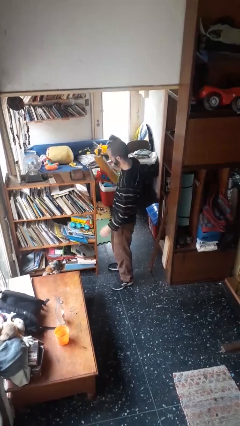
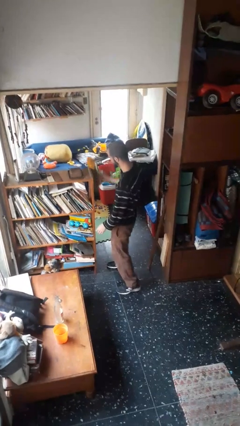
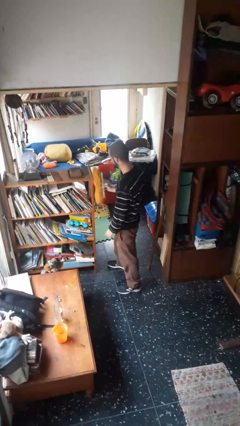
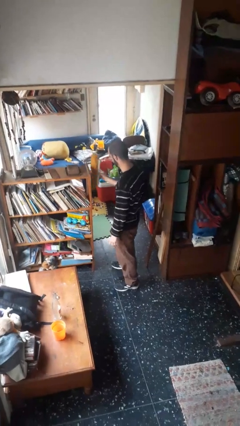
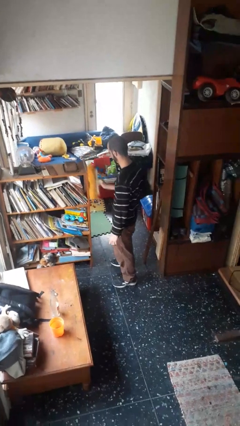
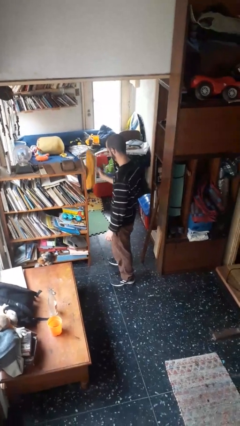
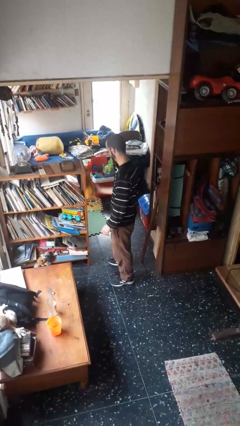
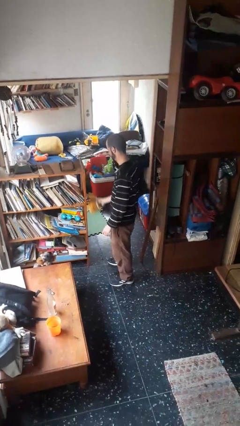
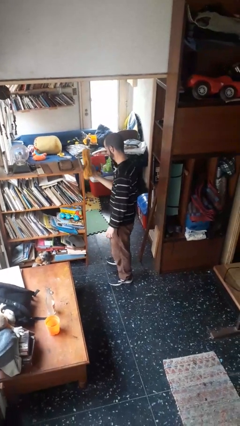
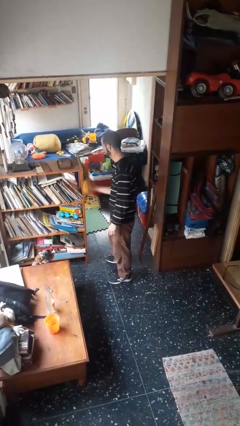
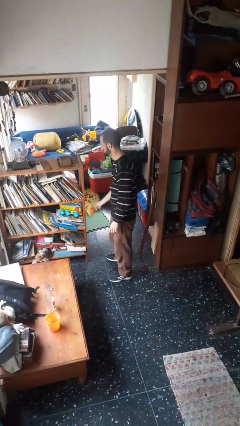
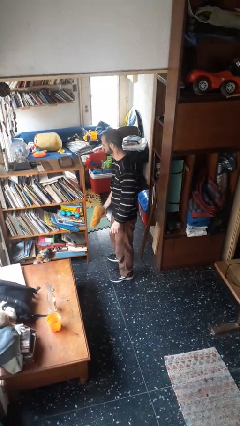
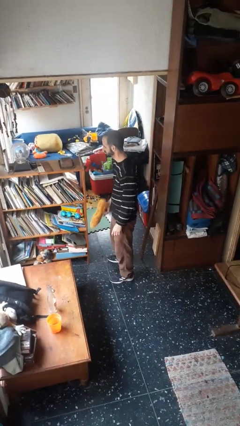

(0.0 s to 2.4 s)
person dusts furniture

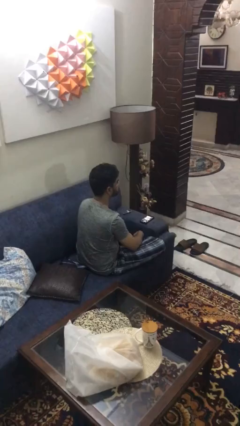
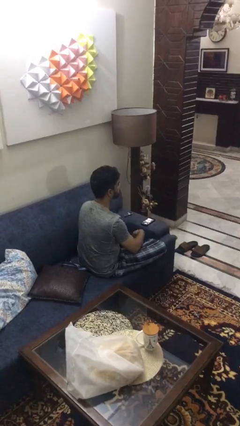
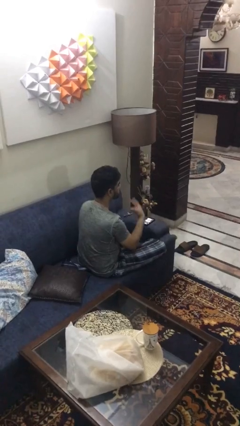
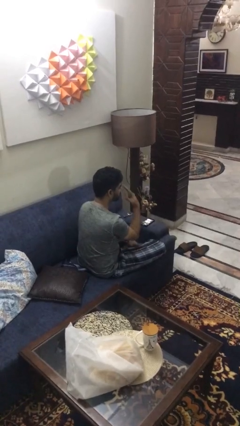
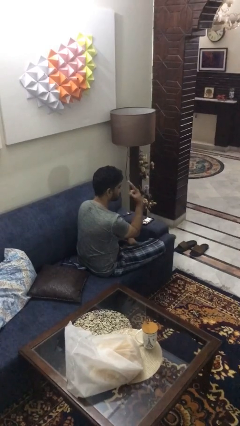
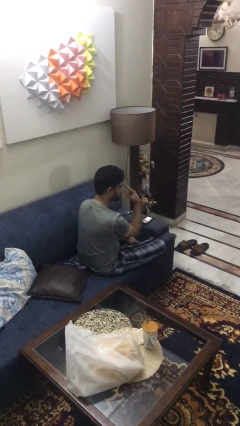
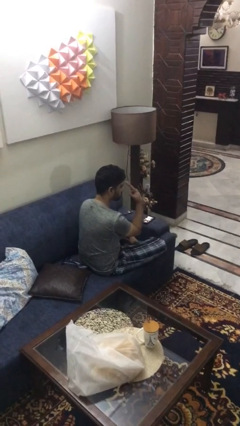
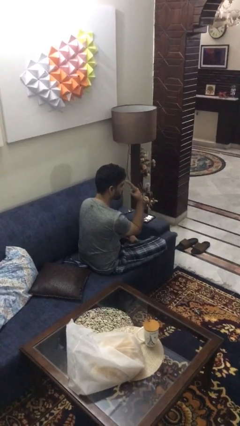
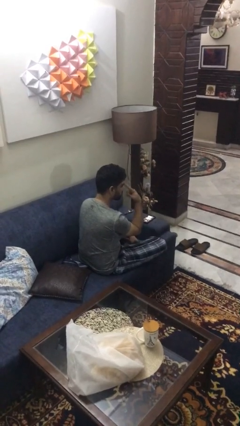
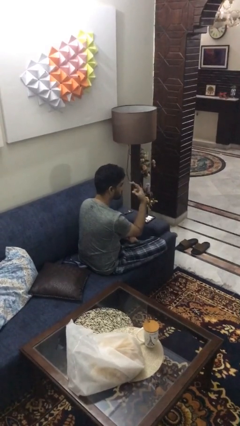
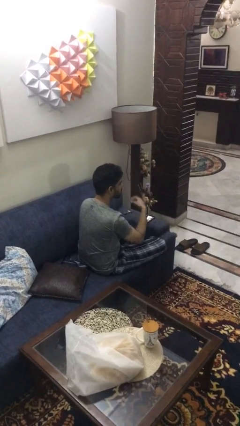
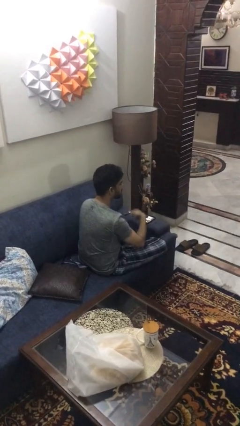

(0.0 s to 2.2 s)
person gestures watch closely

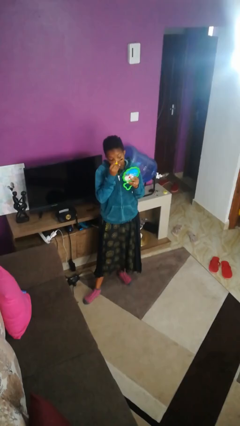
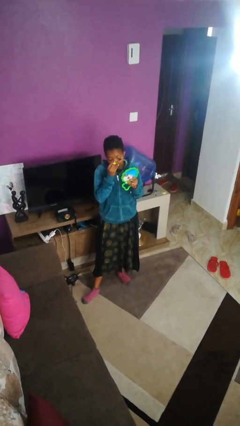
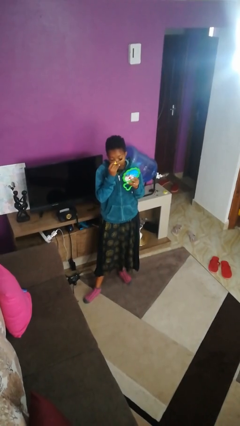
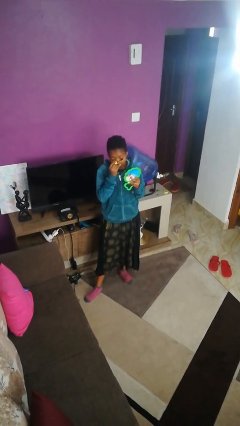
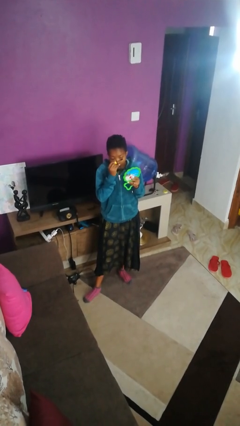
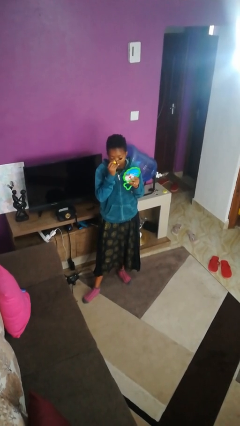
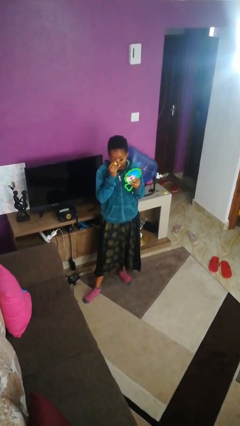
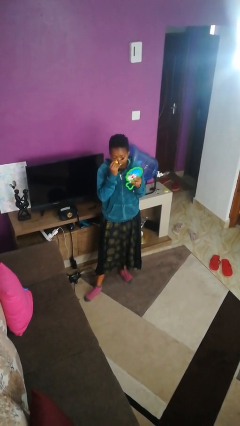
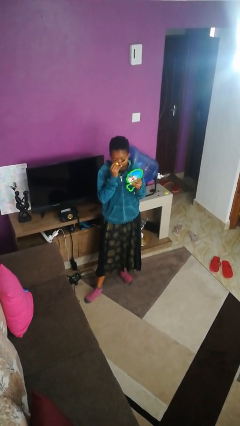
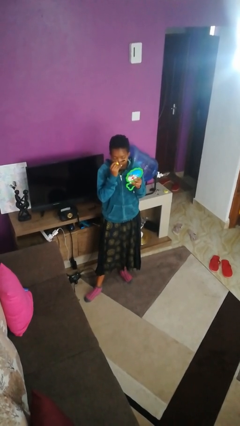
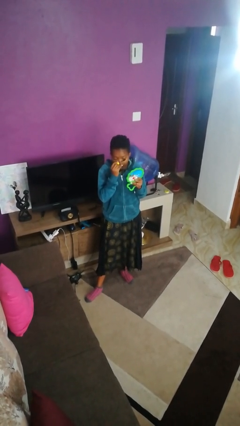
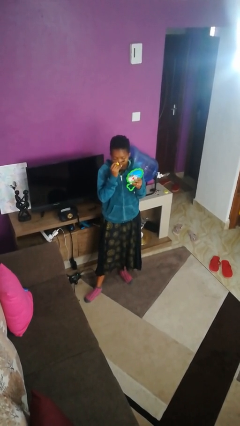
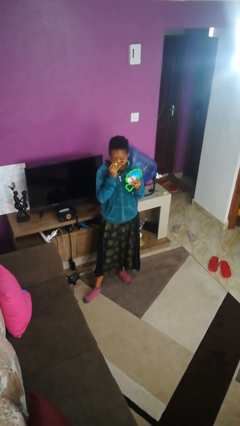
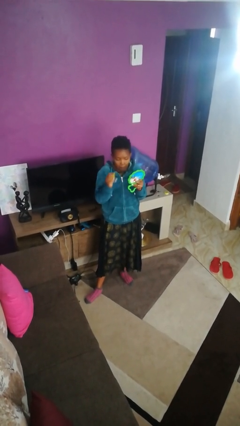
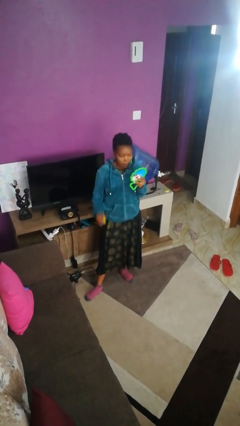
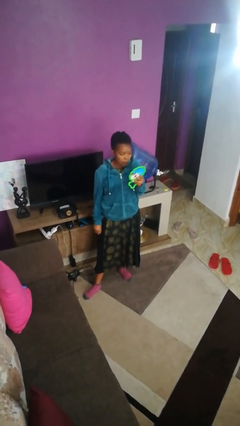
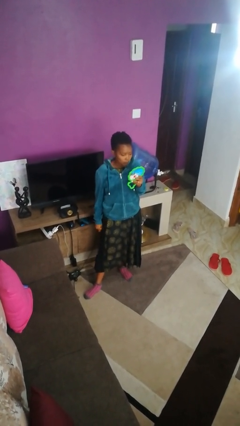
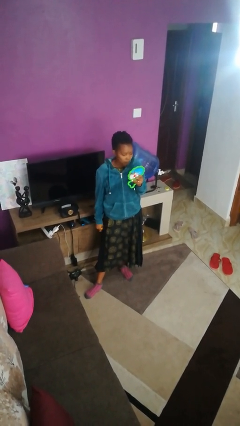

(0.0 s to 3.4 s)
person applies eye makeup

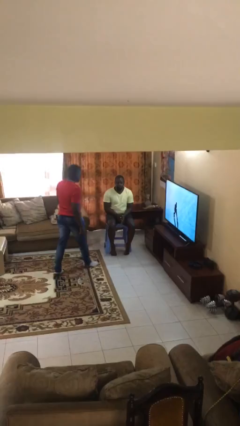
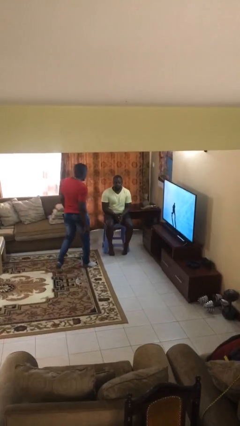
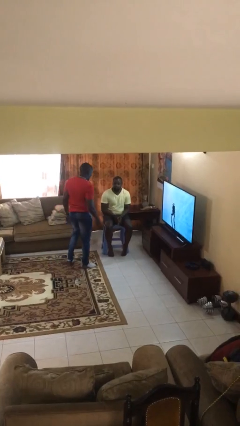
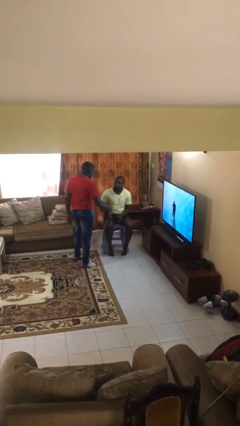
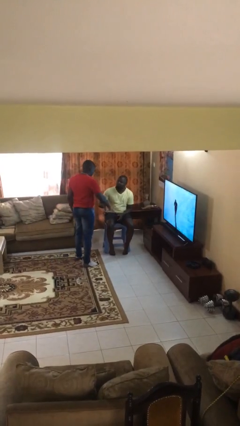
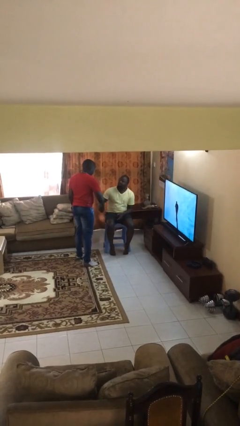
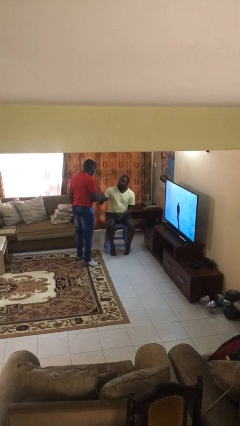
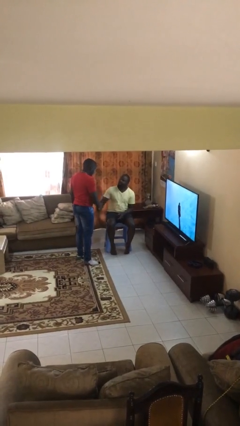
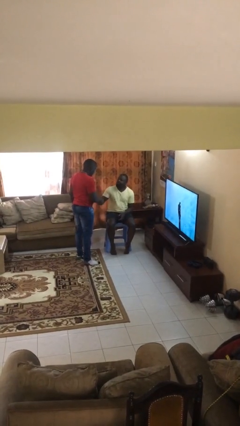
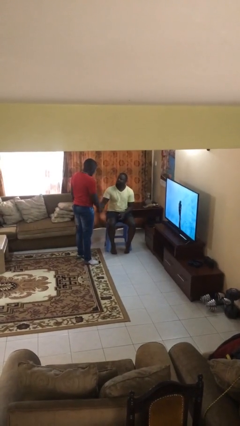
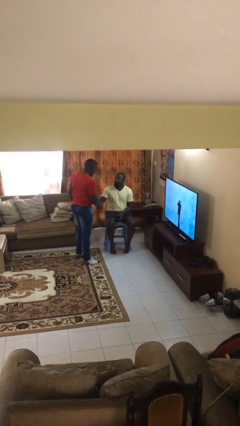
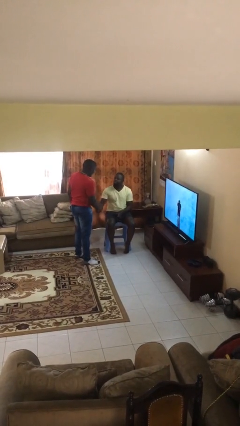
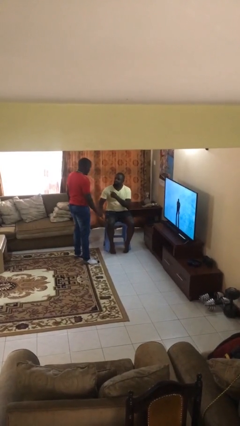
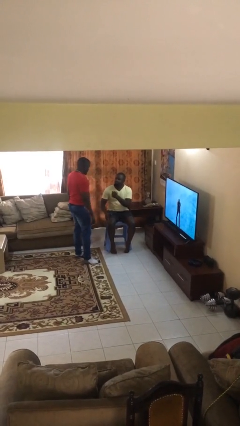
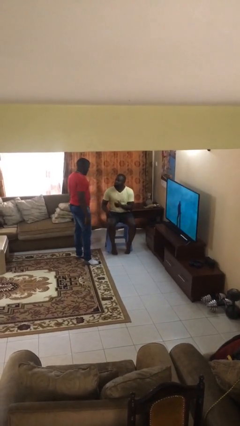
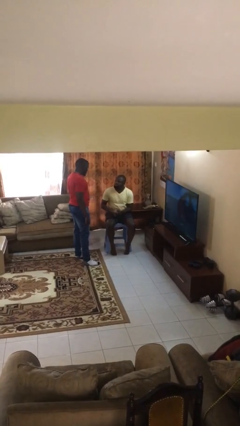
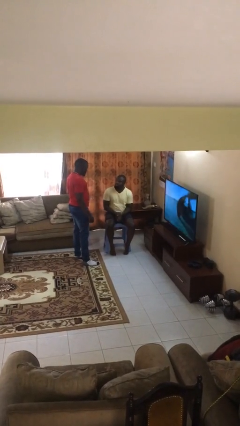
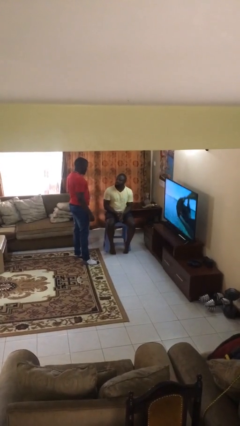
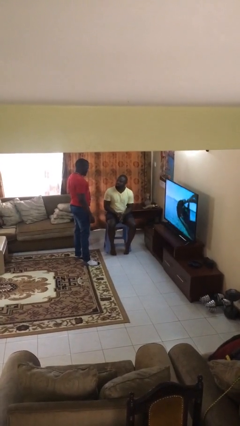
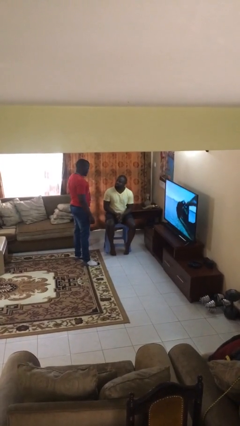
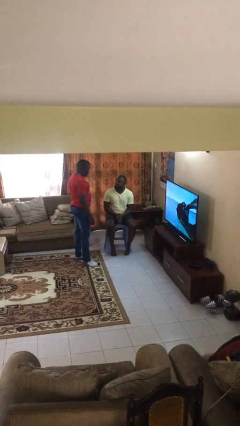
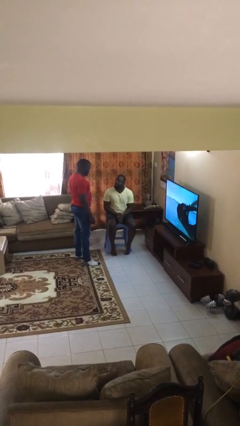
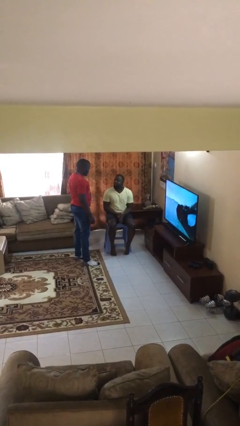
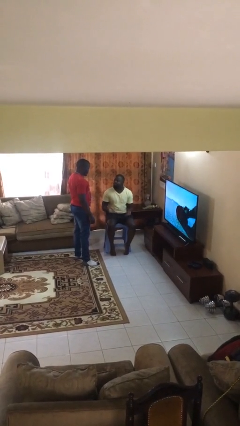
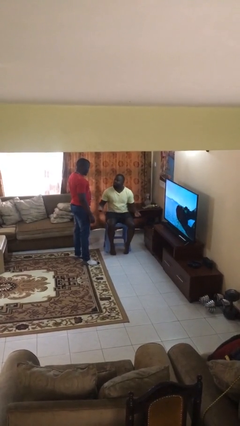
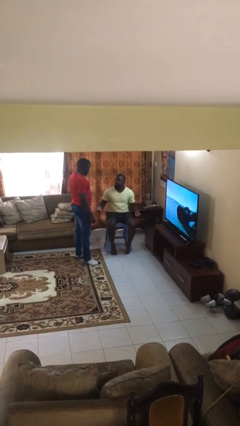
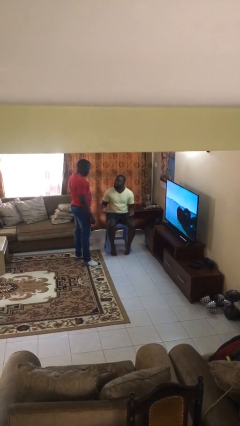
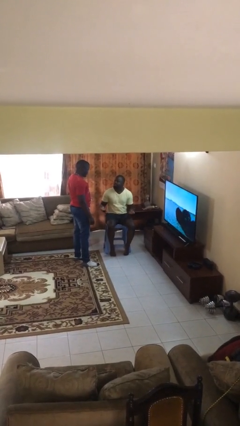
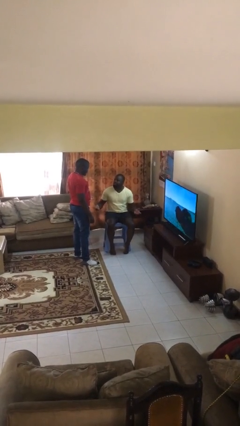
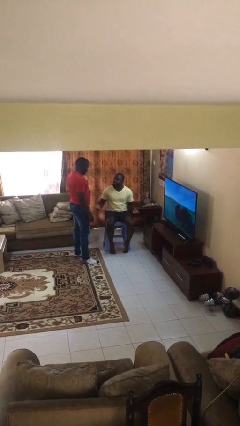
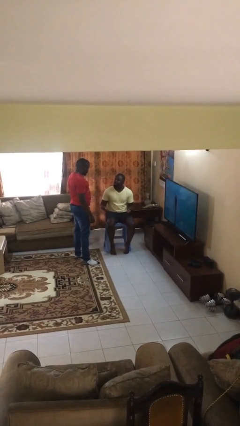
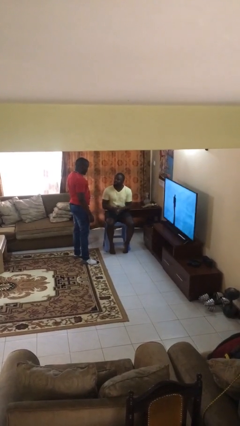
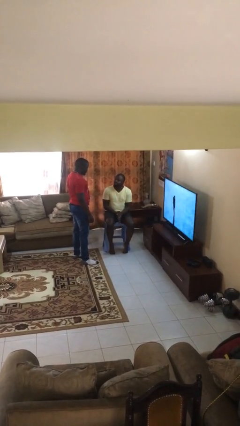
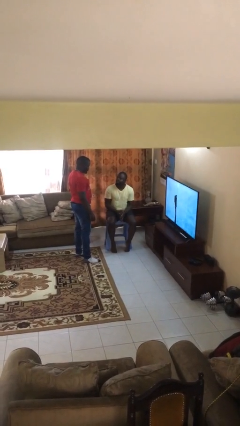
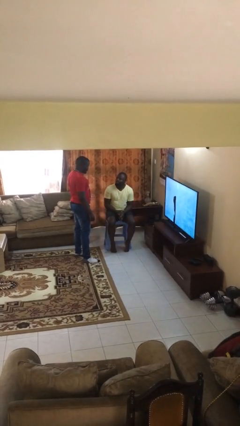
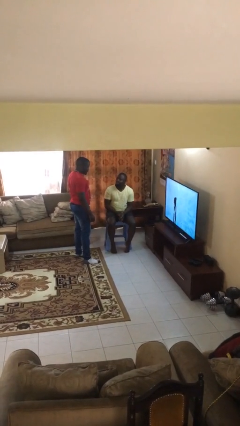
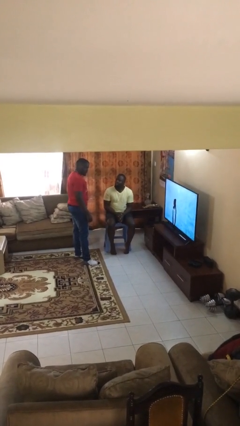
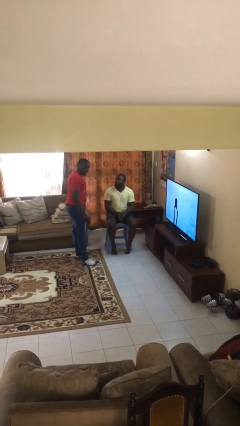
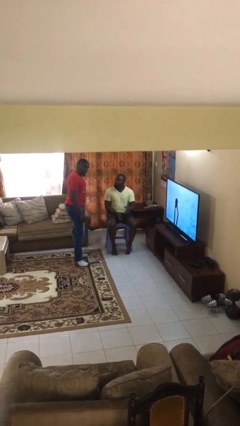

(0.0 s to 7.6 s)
person shakes hand

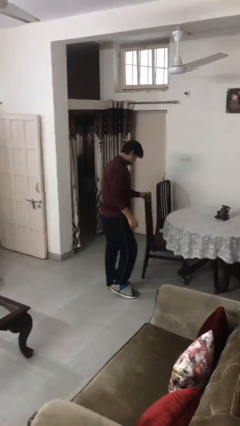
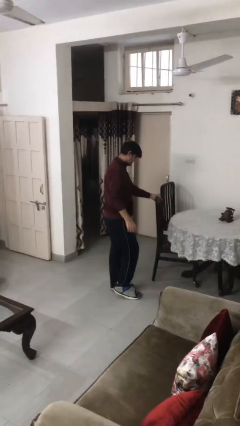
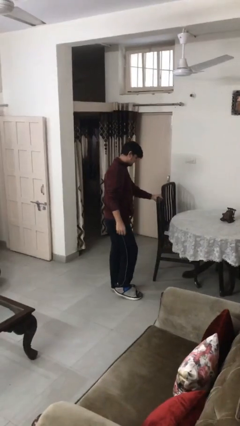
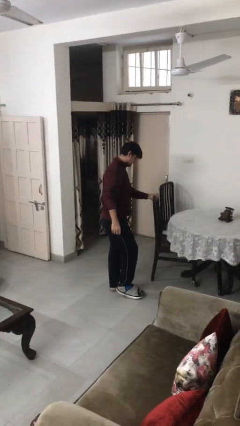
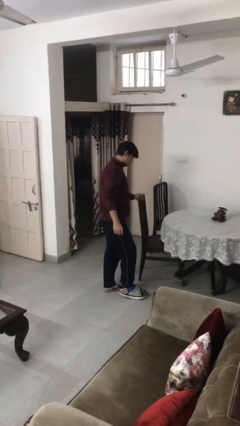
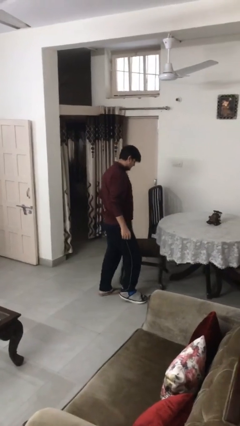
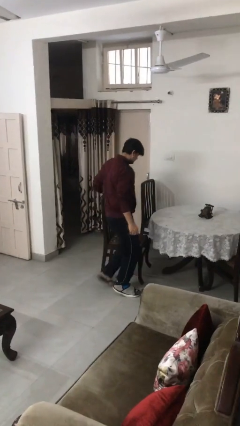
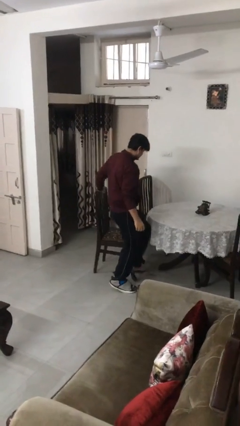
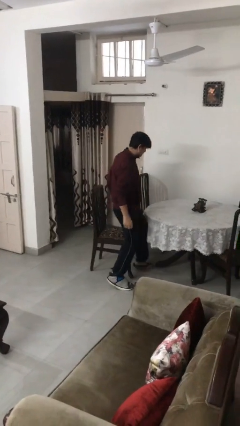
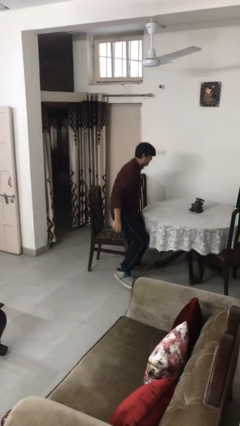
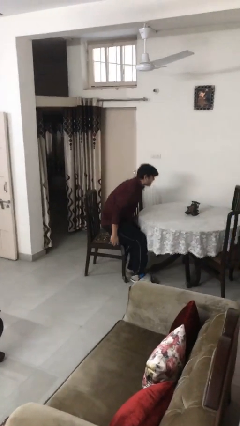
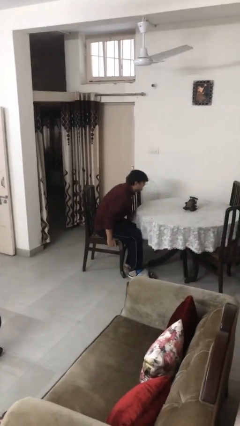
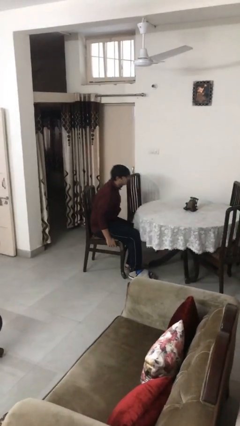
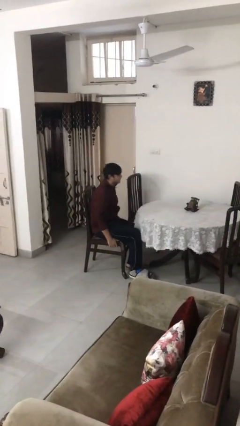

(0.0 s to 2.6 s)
person sits down
